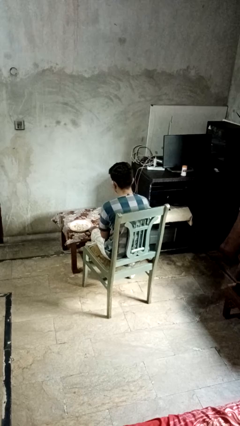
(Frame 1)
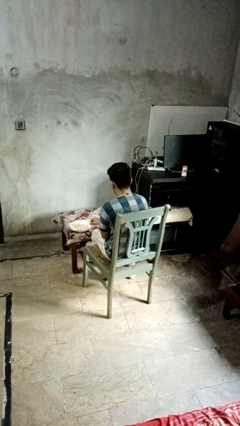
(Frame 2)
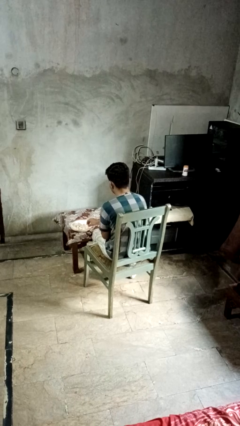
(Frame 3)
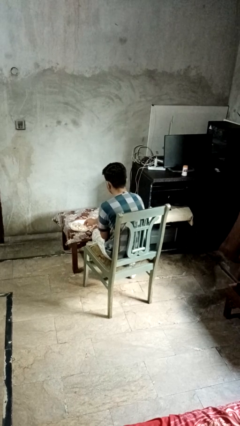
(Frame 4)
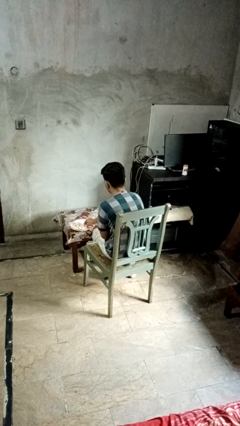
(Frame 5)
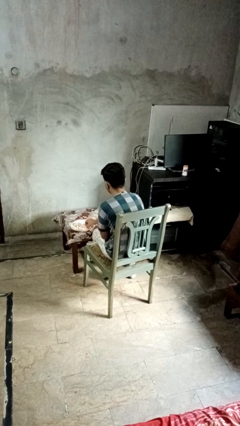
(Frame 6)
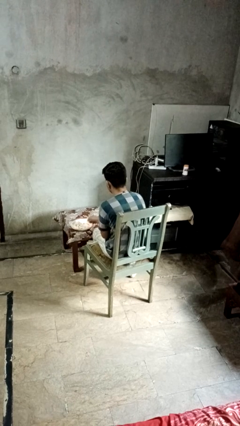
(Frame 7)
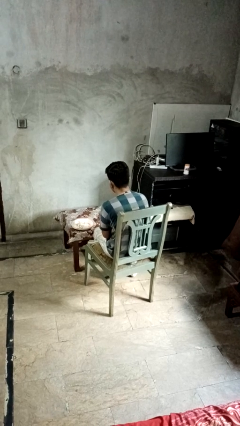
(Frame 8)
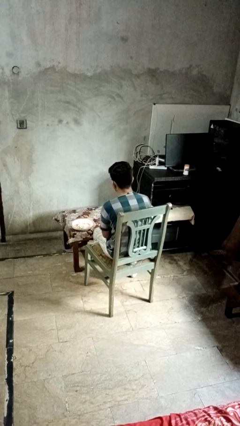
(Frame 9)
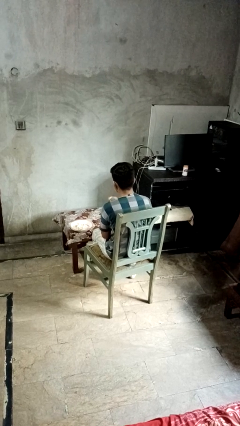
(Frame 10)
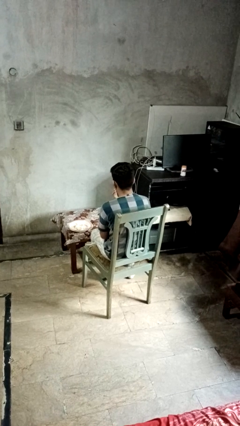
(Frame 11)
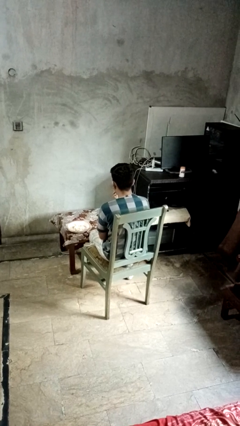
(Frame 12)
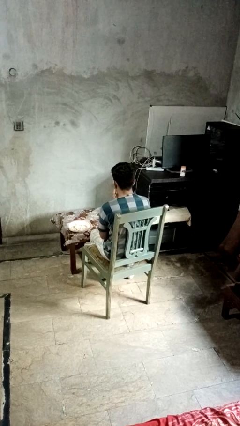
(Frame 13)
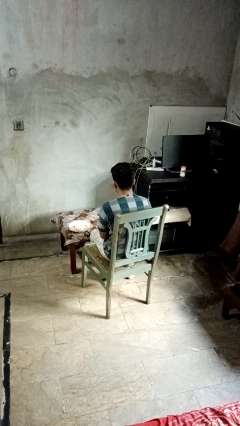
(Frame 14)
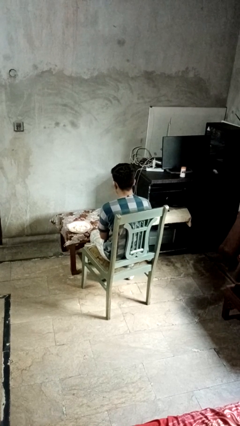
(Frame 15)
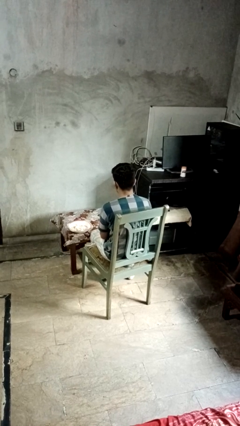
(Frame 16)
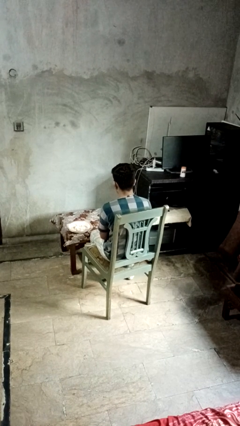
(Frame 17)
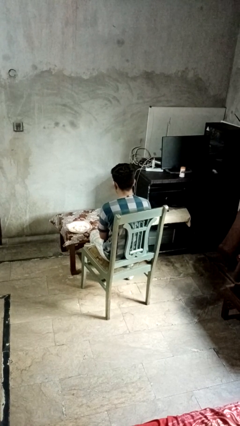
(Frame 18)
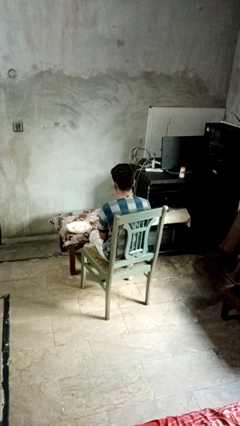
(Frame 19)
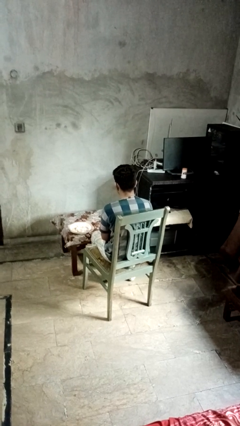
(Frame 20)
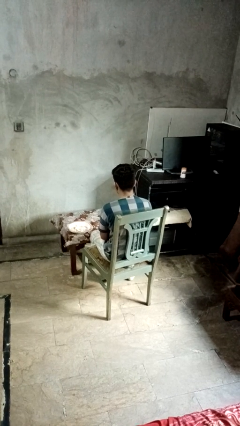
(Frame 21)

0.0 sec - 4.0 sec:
person eats with hands

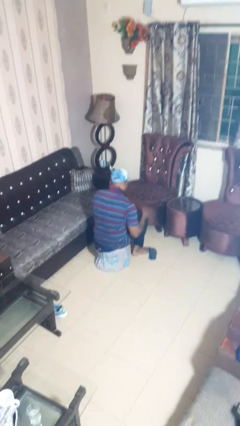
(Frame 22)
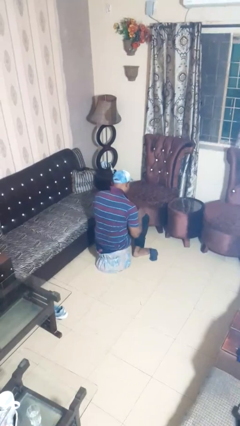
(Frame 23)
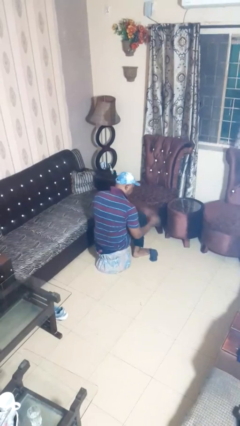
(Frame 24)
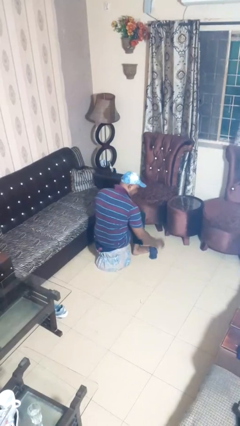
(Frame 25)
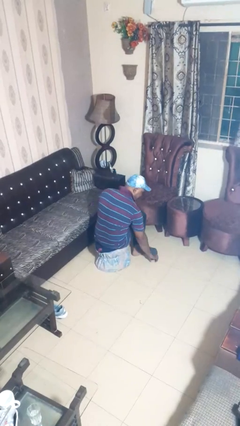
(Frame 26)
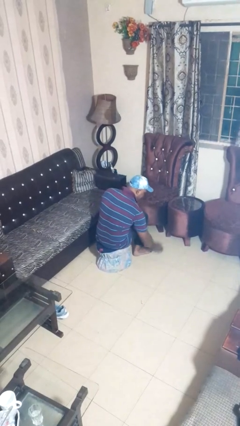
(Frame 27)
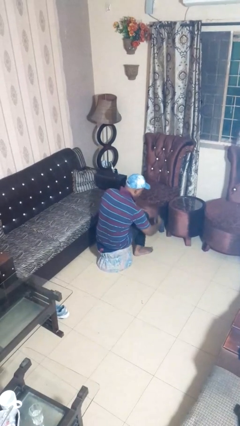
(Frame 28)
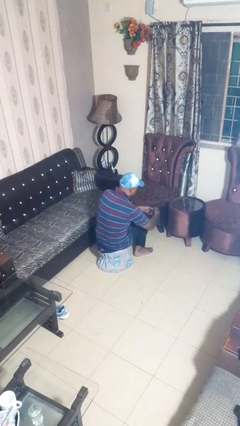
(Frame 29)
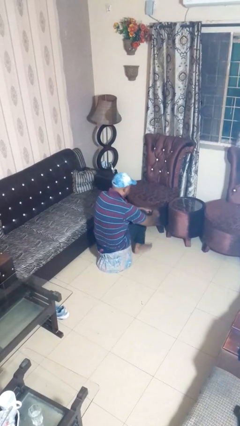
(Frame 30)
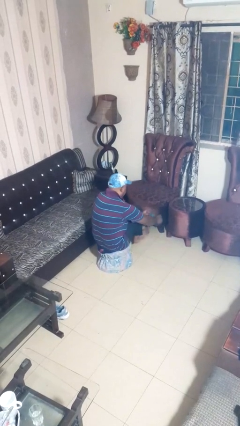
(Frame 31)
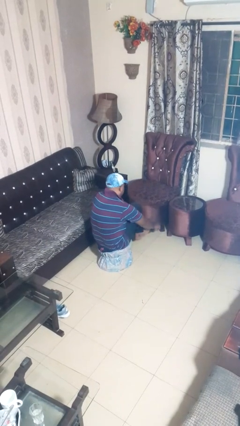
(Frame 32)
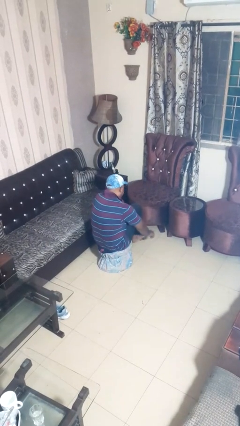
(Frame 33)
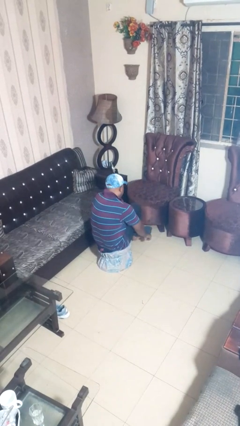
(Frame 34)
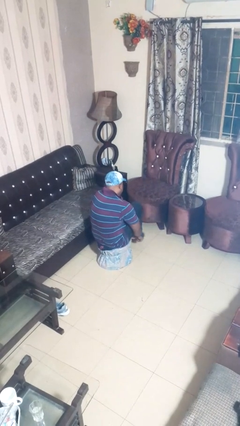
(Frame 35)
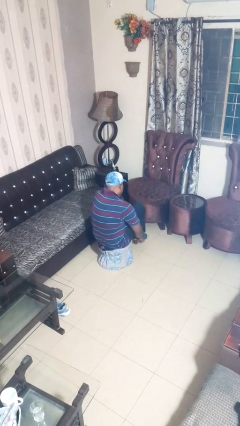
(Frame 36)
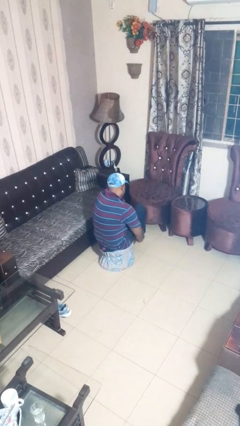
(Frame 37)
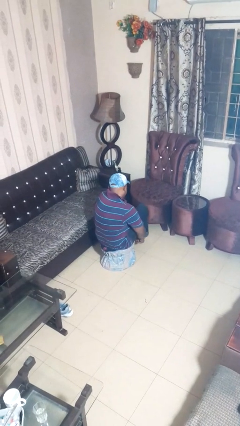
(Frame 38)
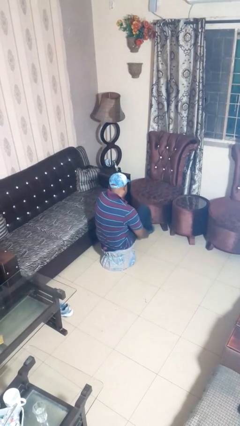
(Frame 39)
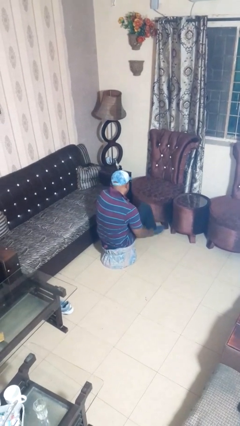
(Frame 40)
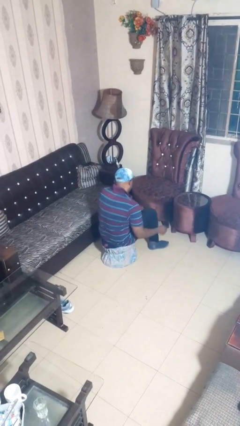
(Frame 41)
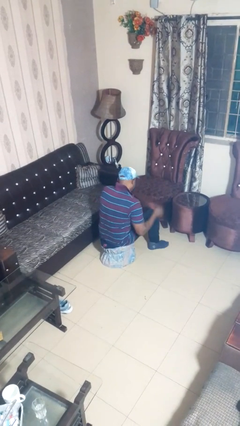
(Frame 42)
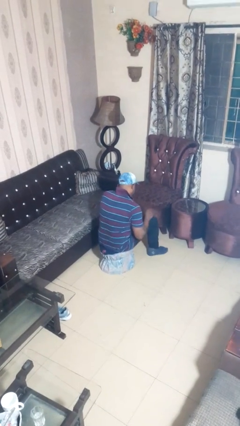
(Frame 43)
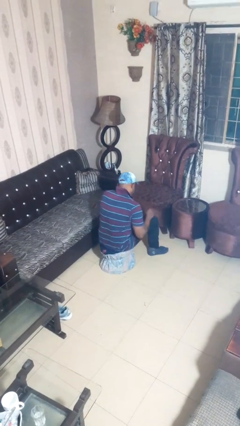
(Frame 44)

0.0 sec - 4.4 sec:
person puts on socks

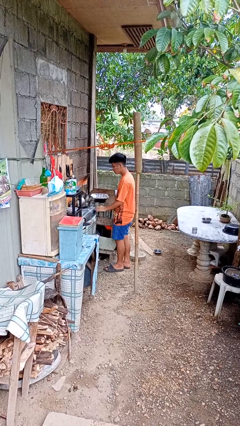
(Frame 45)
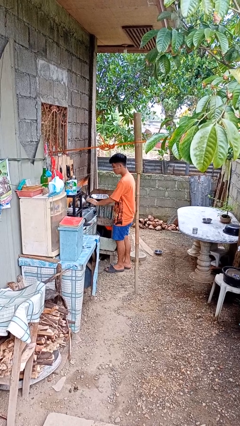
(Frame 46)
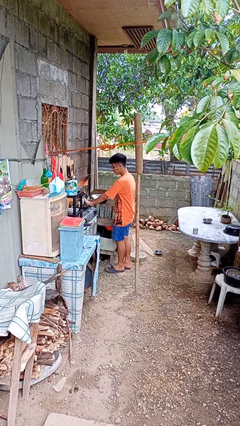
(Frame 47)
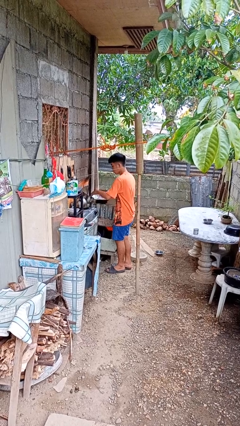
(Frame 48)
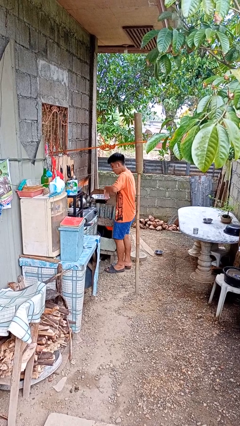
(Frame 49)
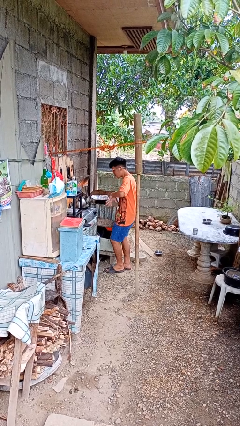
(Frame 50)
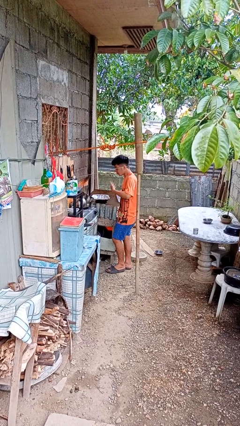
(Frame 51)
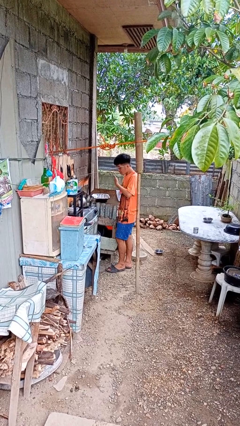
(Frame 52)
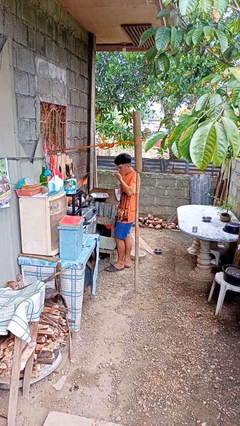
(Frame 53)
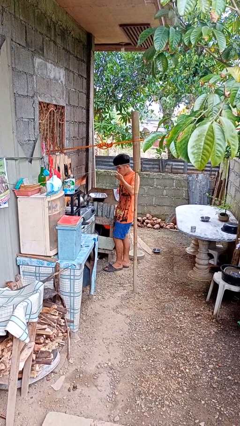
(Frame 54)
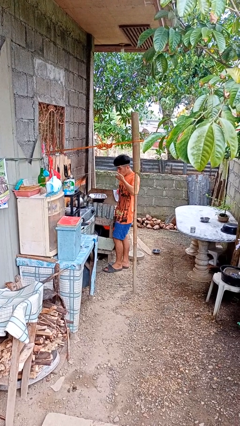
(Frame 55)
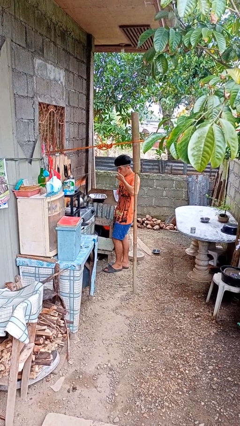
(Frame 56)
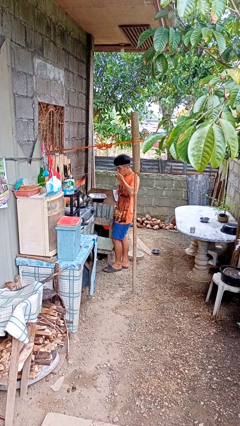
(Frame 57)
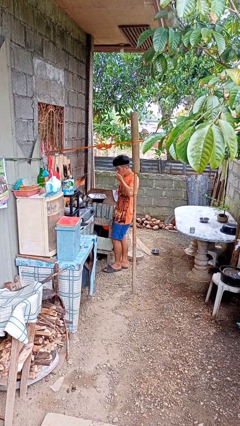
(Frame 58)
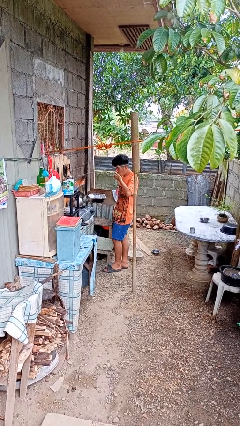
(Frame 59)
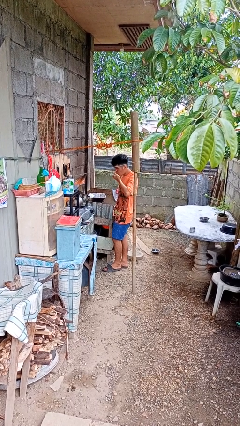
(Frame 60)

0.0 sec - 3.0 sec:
person burns hand

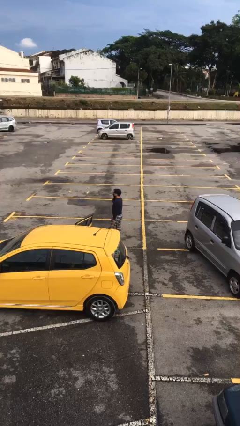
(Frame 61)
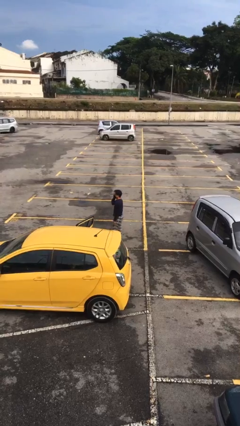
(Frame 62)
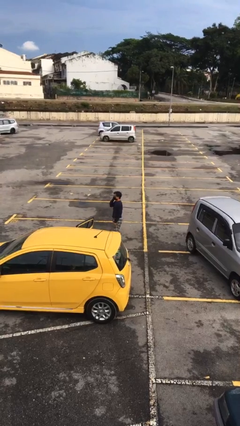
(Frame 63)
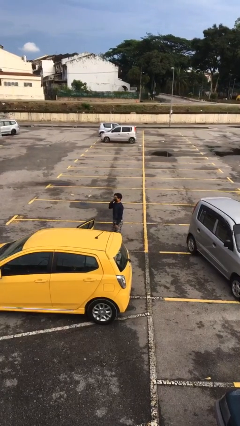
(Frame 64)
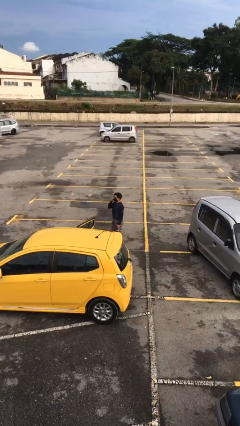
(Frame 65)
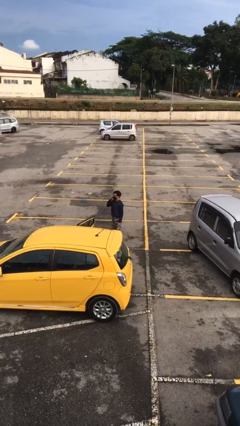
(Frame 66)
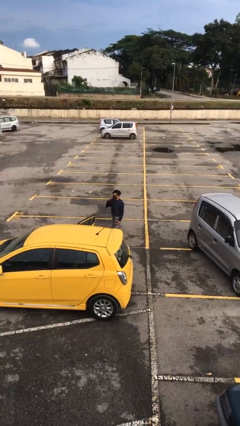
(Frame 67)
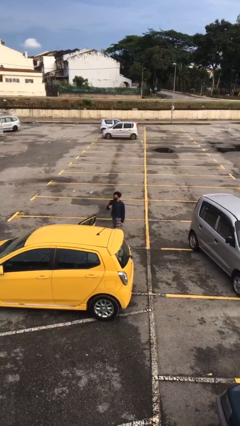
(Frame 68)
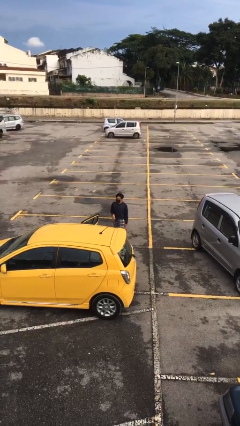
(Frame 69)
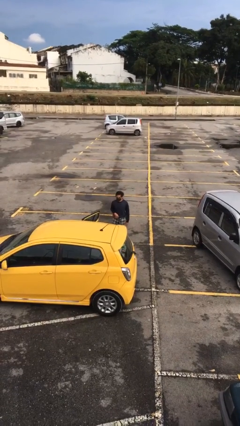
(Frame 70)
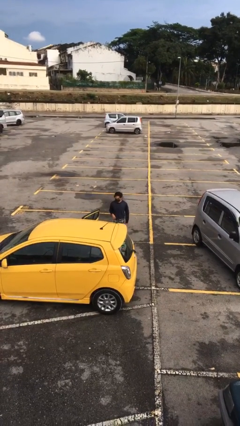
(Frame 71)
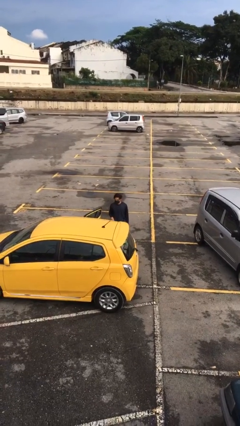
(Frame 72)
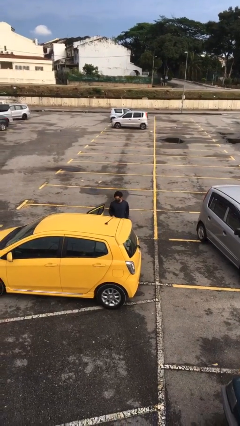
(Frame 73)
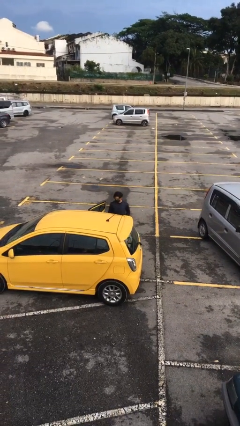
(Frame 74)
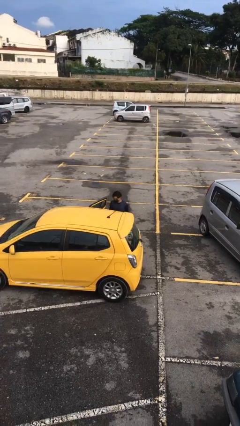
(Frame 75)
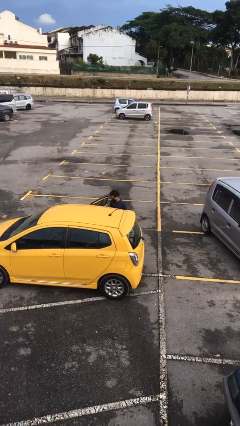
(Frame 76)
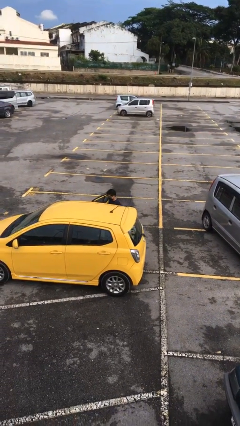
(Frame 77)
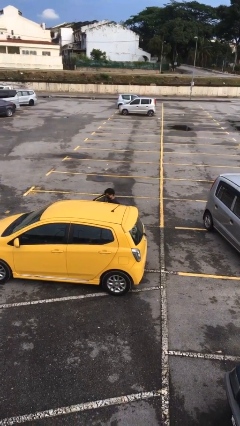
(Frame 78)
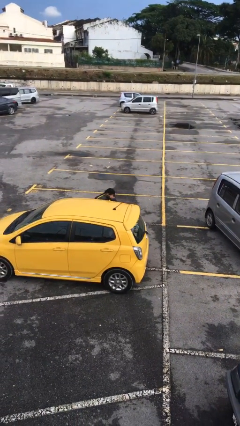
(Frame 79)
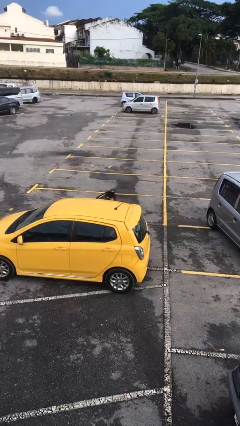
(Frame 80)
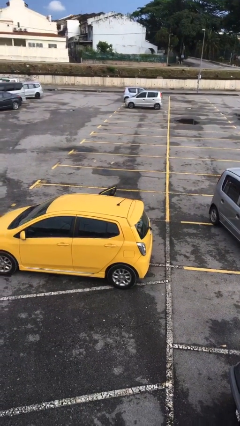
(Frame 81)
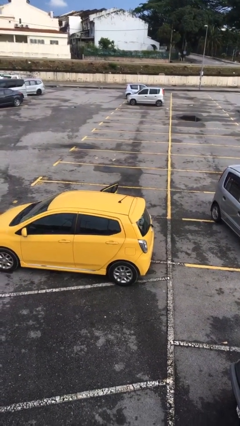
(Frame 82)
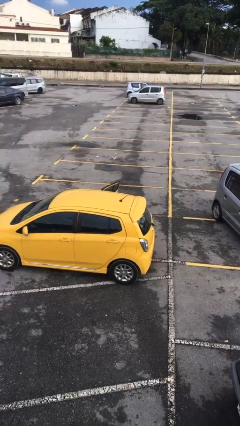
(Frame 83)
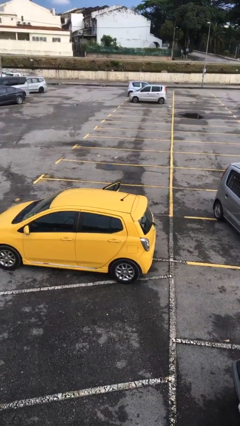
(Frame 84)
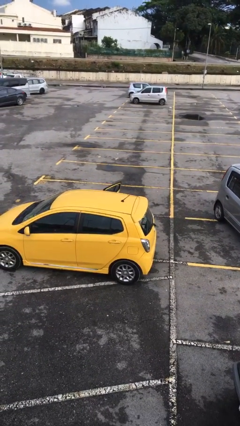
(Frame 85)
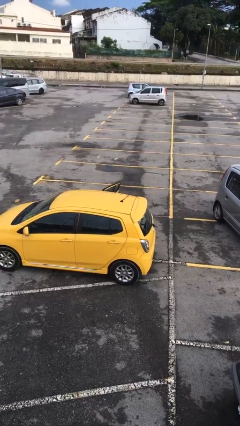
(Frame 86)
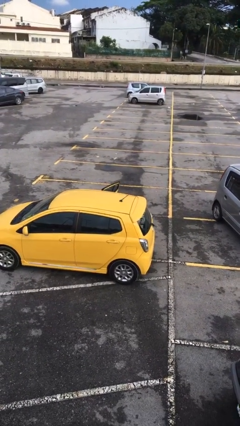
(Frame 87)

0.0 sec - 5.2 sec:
person enters car

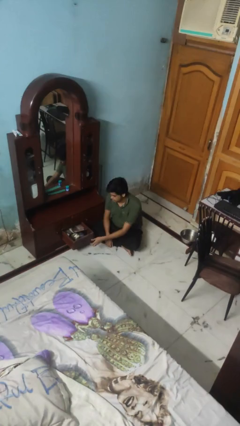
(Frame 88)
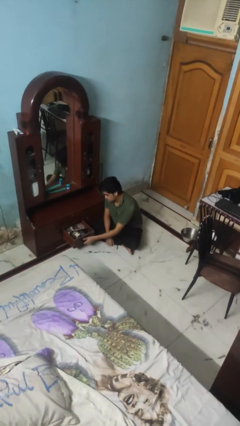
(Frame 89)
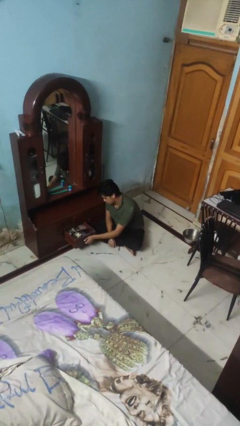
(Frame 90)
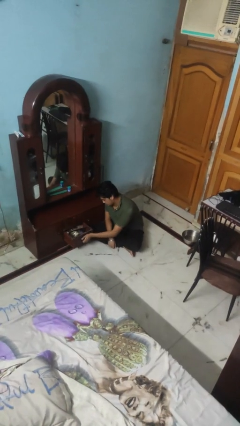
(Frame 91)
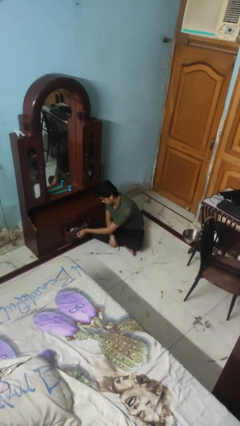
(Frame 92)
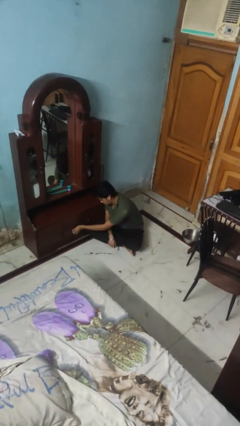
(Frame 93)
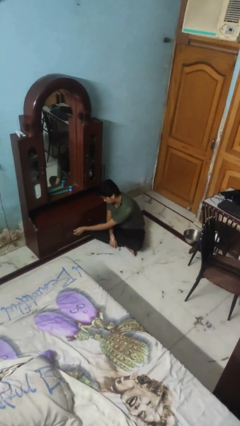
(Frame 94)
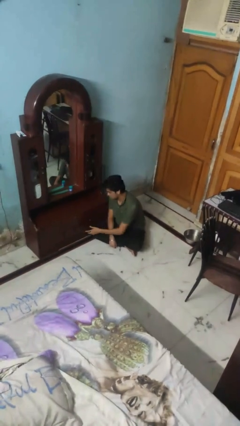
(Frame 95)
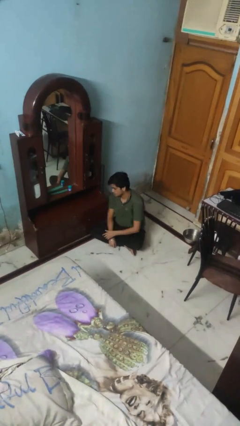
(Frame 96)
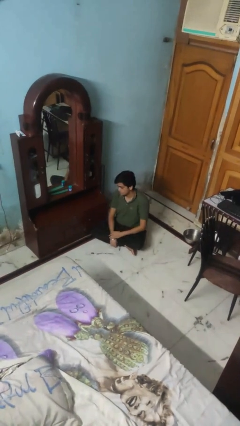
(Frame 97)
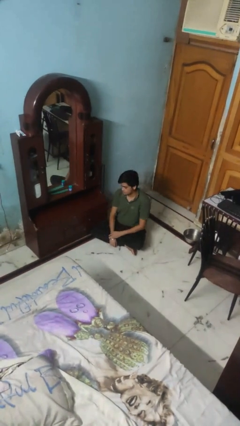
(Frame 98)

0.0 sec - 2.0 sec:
person closes dresser drawer
